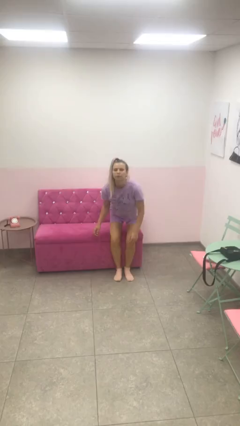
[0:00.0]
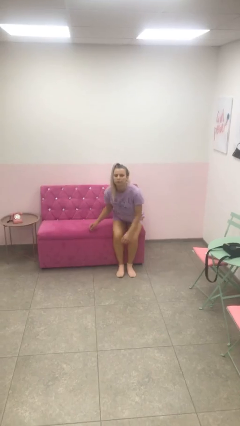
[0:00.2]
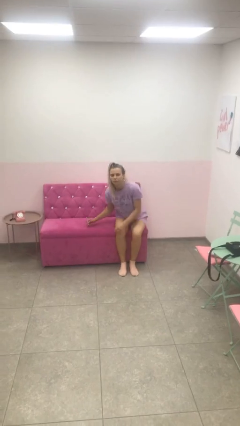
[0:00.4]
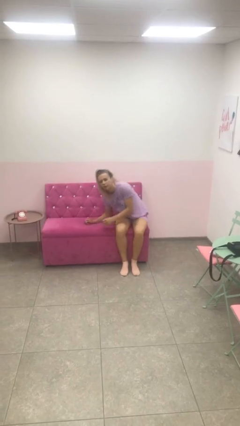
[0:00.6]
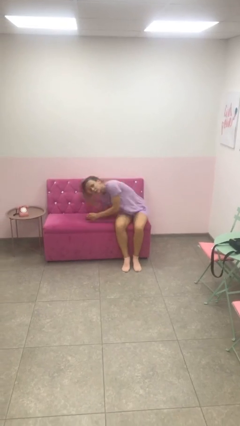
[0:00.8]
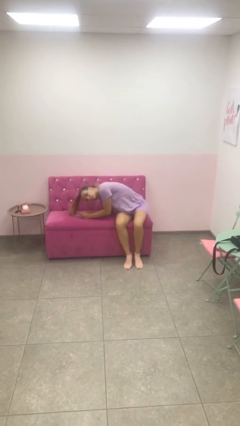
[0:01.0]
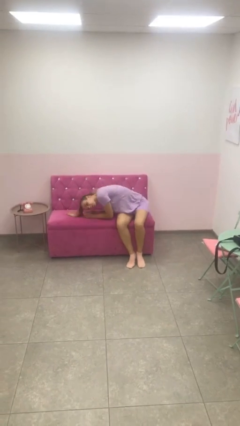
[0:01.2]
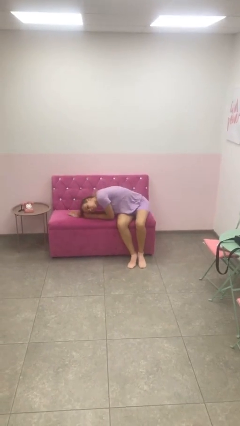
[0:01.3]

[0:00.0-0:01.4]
person lies down on couch

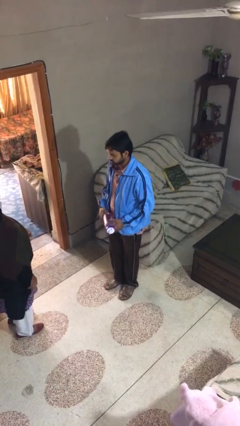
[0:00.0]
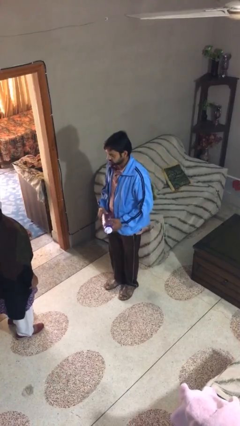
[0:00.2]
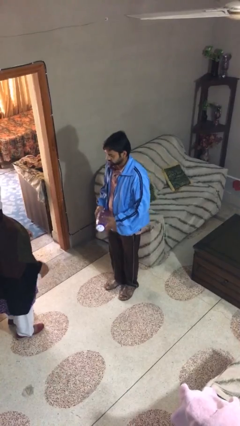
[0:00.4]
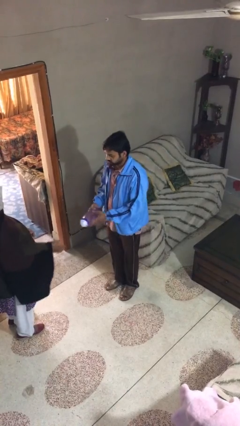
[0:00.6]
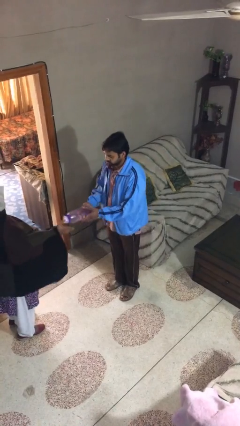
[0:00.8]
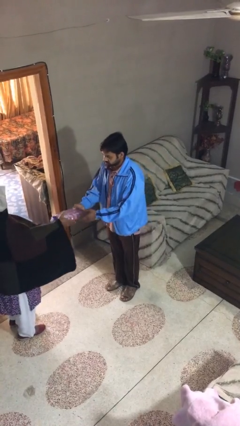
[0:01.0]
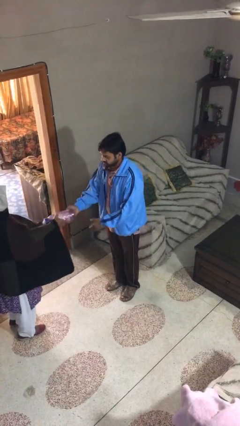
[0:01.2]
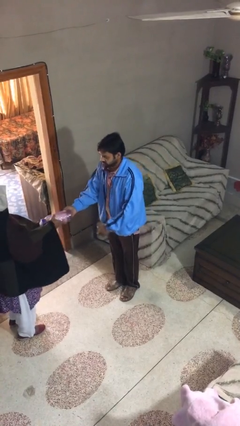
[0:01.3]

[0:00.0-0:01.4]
person transfers object to person

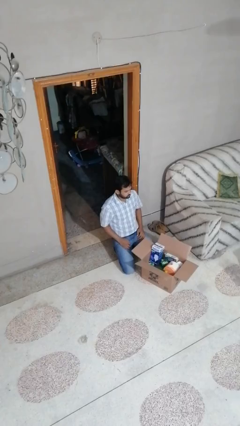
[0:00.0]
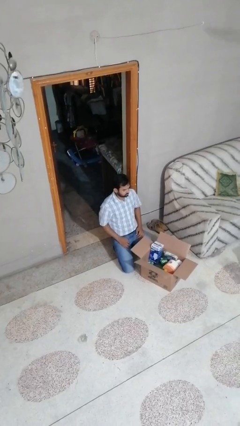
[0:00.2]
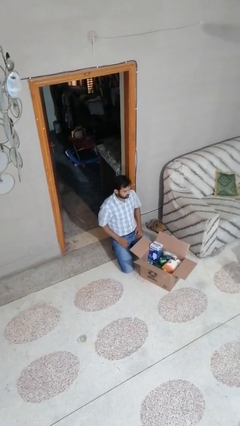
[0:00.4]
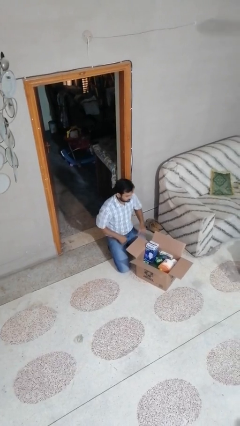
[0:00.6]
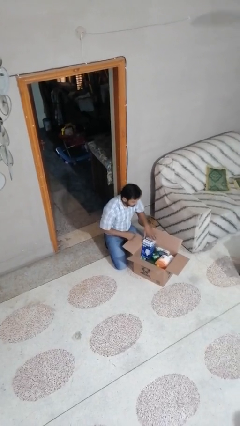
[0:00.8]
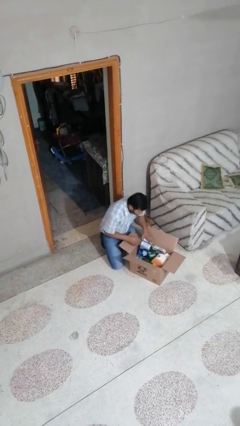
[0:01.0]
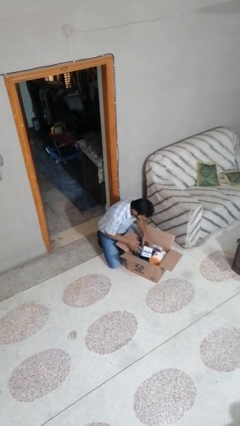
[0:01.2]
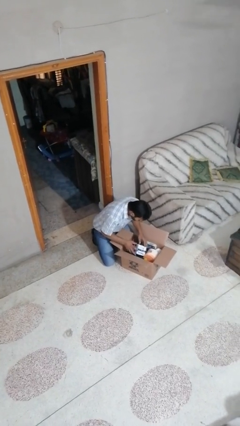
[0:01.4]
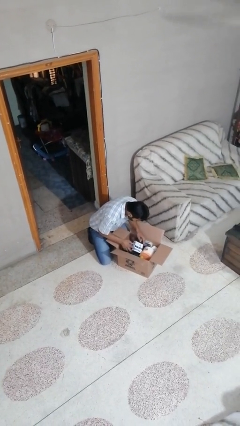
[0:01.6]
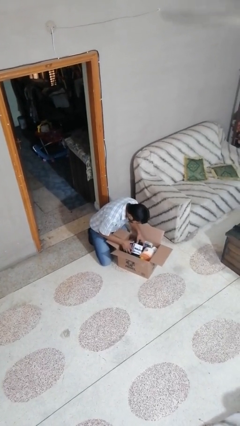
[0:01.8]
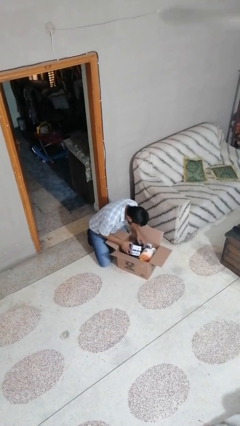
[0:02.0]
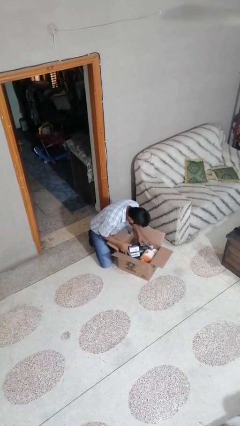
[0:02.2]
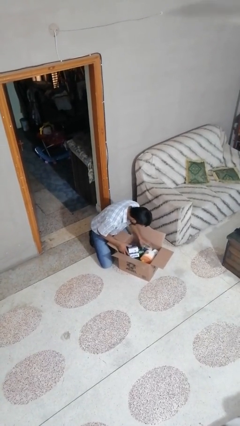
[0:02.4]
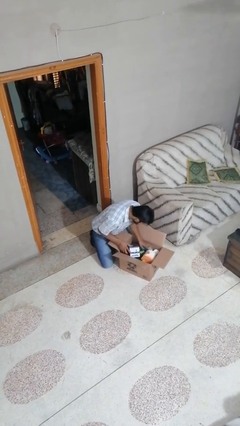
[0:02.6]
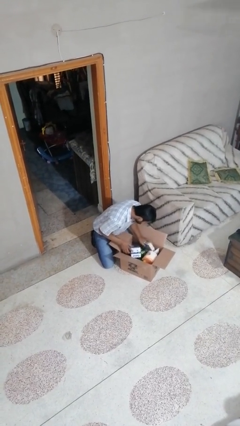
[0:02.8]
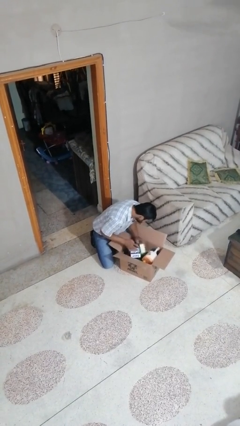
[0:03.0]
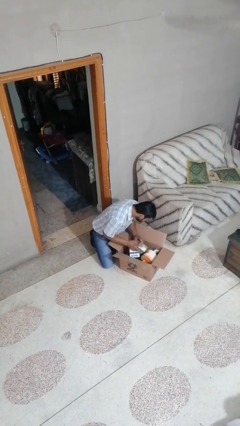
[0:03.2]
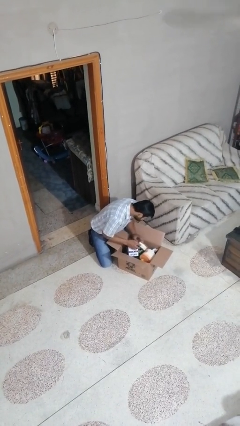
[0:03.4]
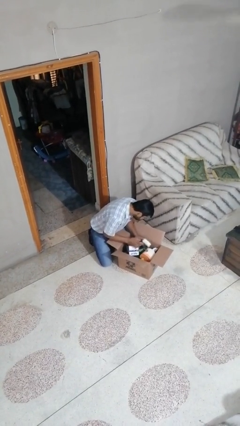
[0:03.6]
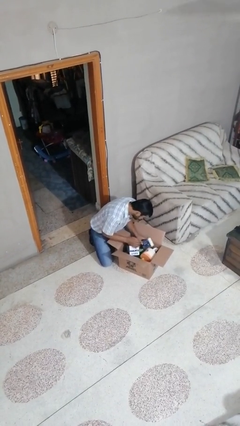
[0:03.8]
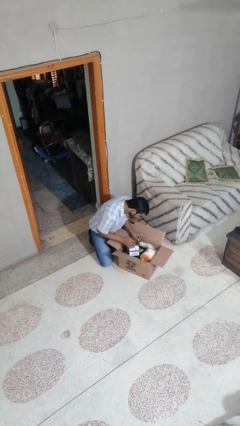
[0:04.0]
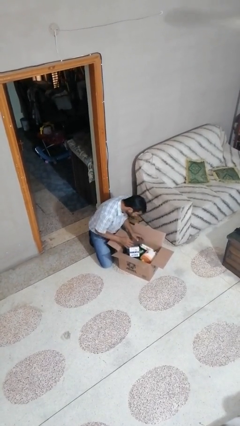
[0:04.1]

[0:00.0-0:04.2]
person searches in box

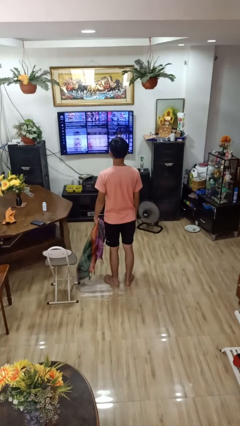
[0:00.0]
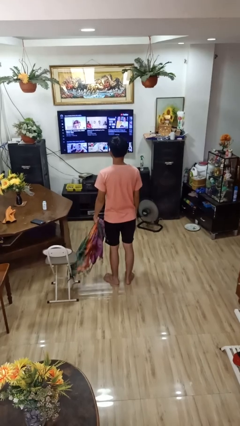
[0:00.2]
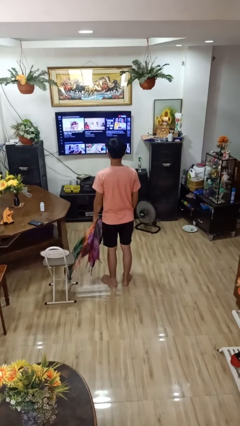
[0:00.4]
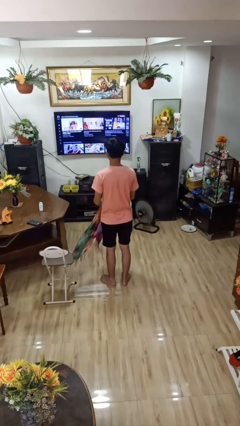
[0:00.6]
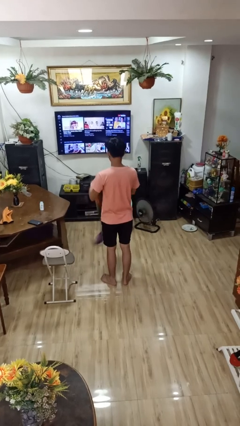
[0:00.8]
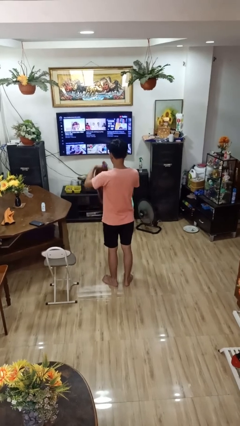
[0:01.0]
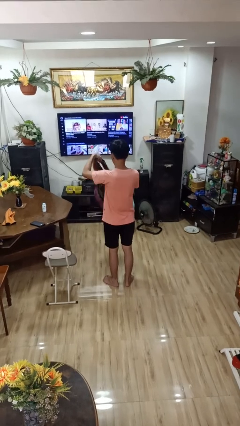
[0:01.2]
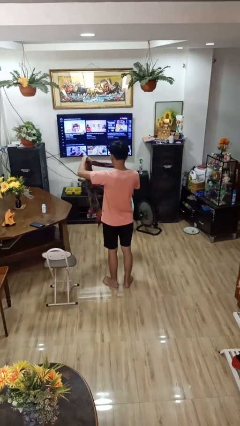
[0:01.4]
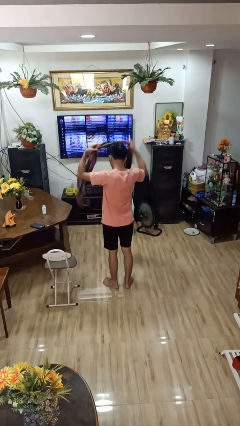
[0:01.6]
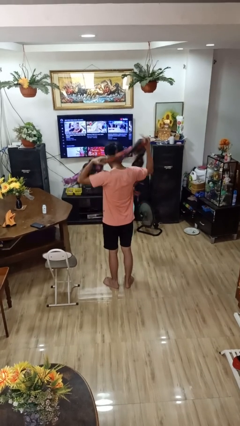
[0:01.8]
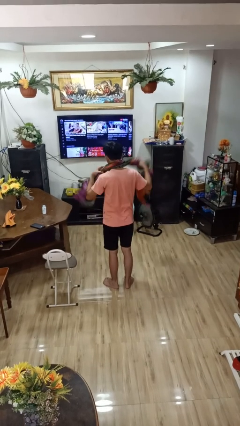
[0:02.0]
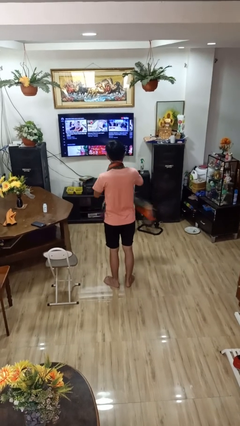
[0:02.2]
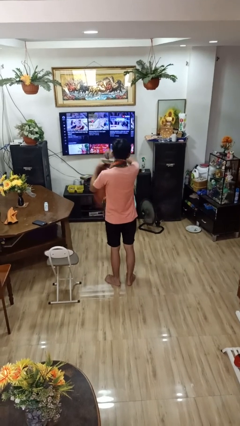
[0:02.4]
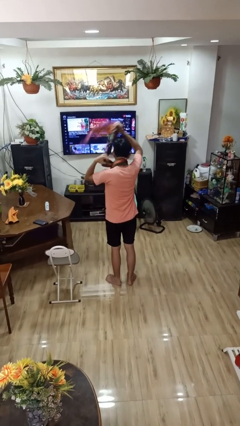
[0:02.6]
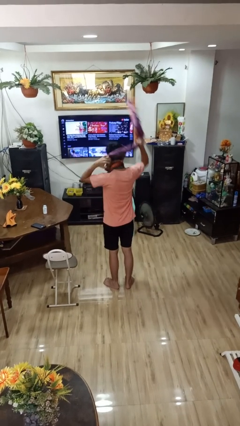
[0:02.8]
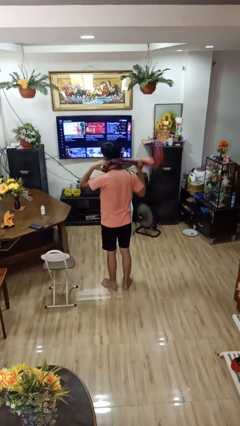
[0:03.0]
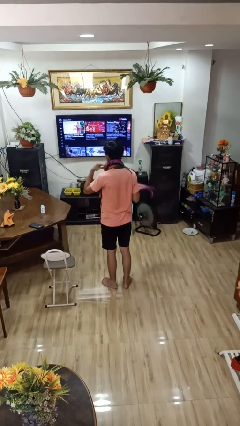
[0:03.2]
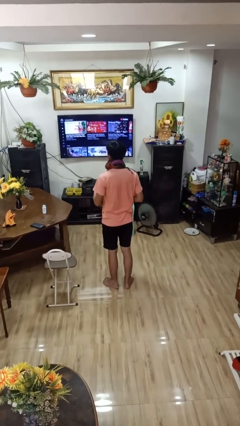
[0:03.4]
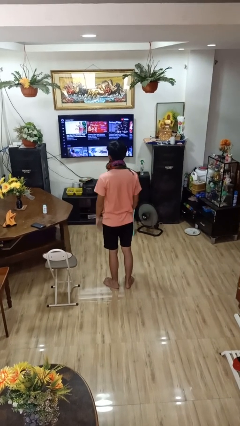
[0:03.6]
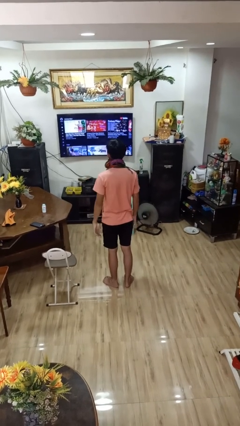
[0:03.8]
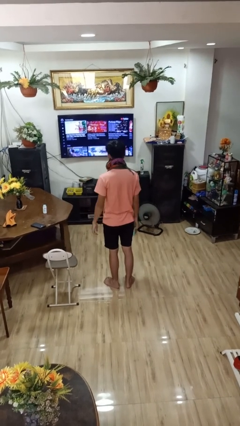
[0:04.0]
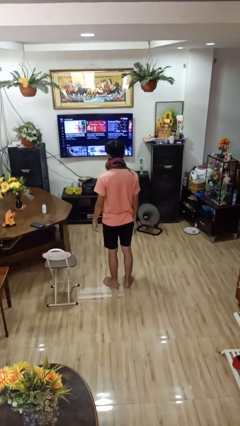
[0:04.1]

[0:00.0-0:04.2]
person puts on scarf

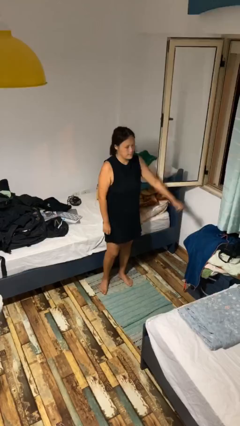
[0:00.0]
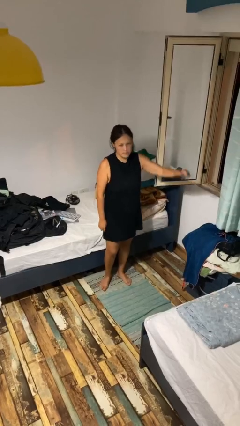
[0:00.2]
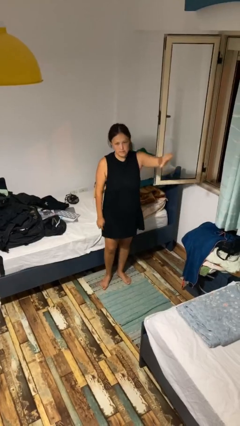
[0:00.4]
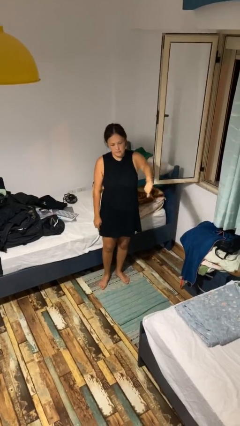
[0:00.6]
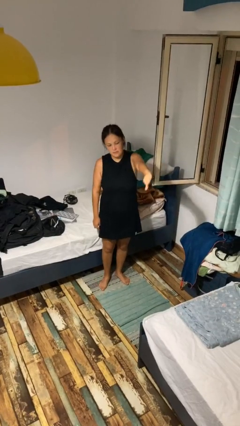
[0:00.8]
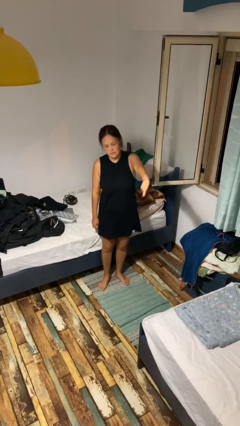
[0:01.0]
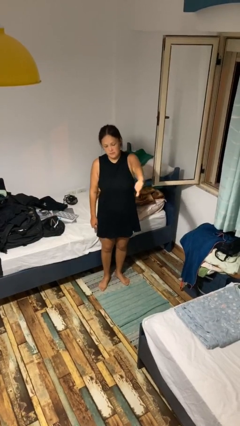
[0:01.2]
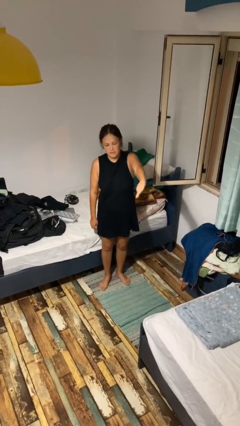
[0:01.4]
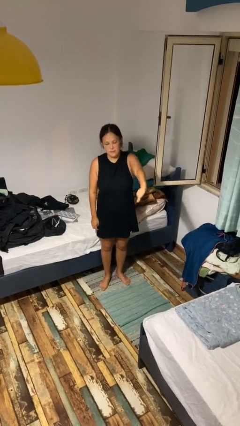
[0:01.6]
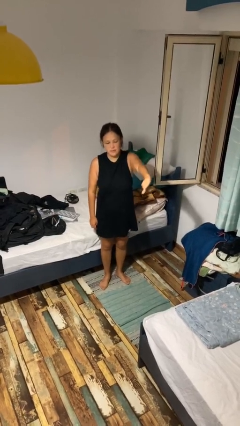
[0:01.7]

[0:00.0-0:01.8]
person gestures thumbs down

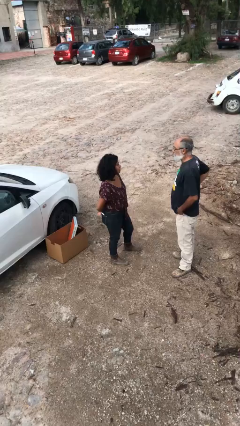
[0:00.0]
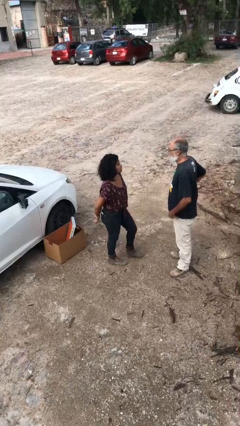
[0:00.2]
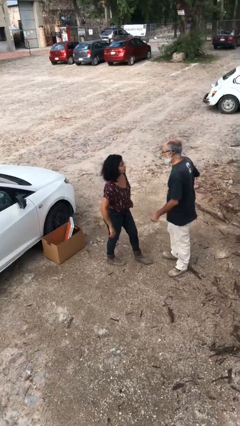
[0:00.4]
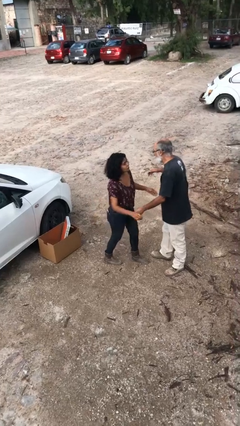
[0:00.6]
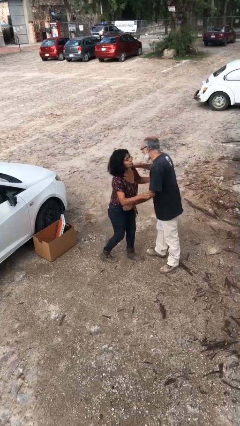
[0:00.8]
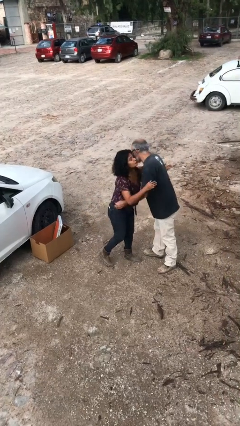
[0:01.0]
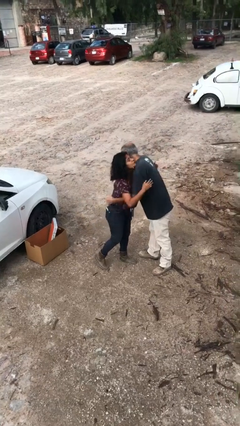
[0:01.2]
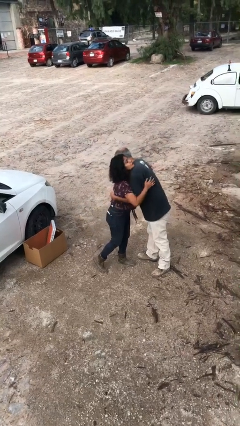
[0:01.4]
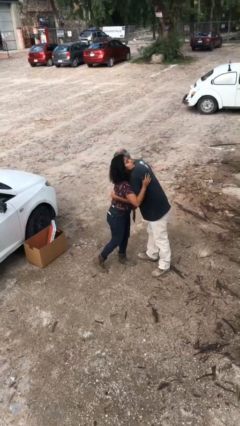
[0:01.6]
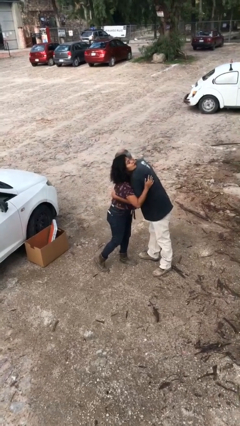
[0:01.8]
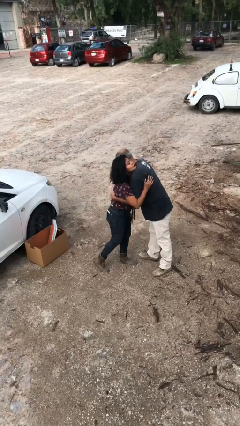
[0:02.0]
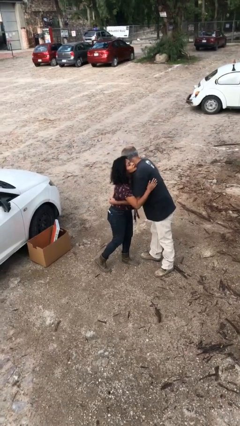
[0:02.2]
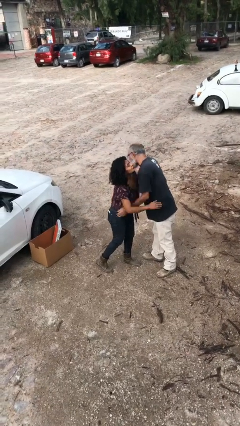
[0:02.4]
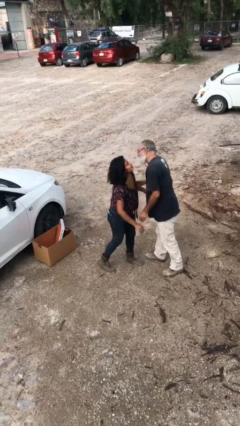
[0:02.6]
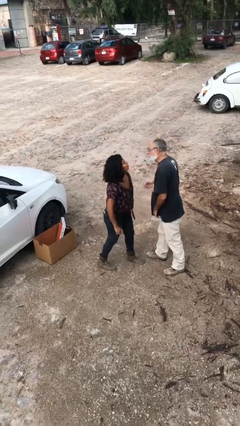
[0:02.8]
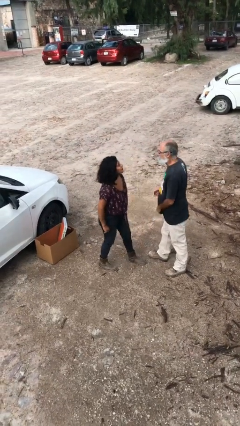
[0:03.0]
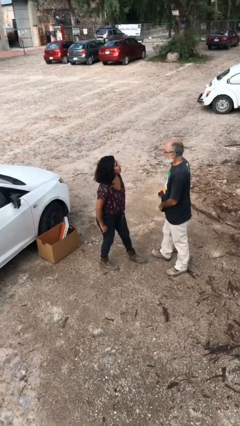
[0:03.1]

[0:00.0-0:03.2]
person embraces person

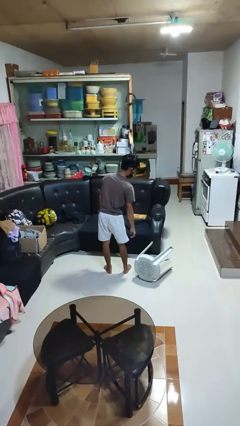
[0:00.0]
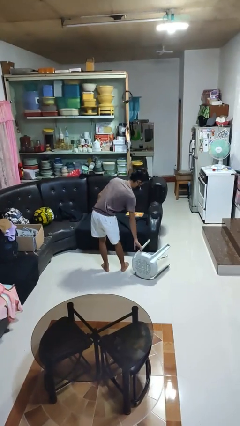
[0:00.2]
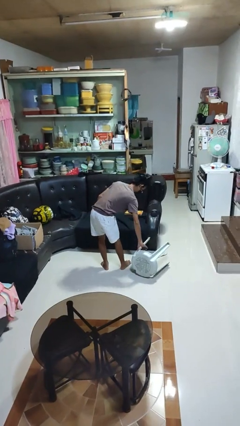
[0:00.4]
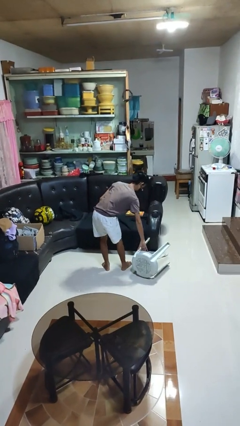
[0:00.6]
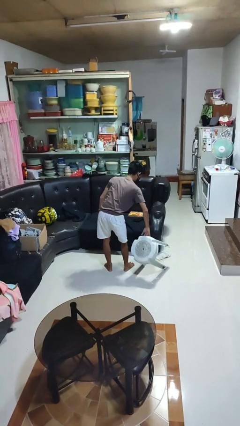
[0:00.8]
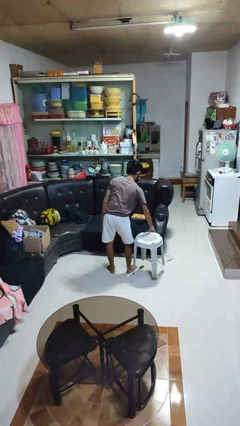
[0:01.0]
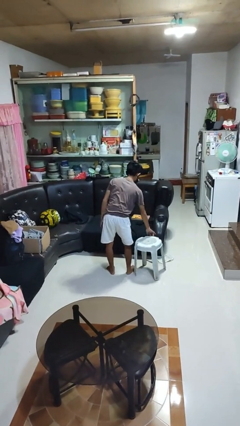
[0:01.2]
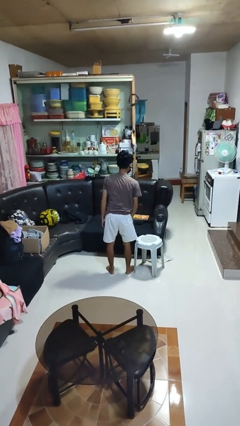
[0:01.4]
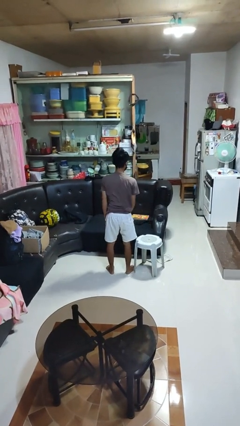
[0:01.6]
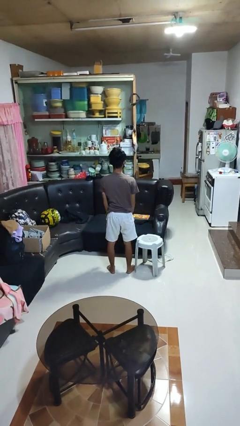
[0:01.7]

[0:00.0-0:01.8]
person sets upright furniture
